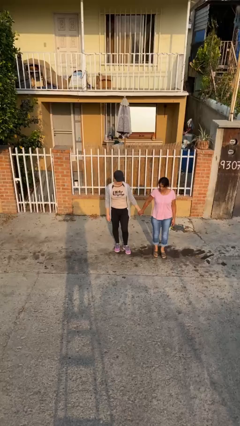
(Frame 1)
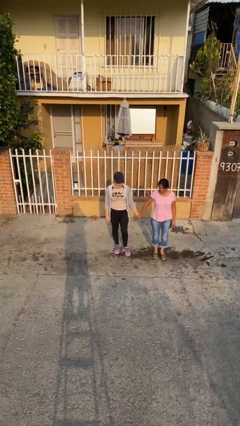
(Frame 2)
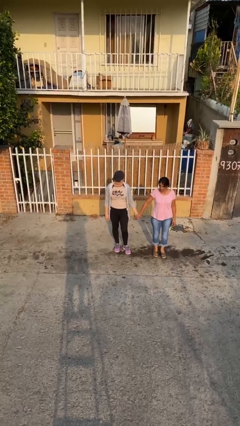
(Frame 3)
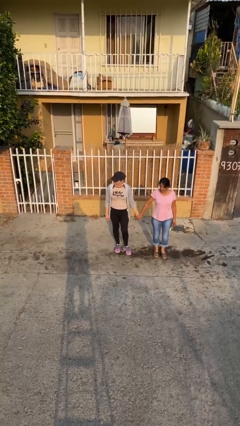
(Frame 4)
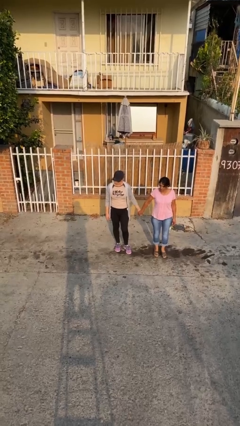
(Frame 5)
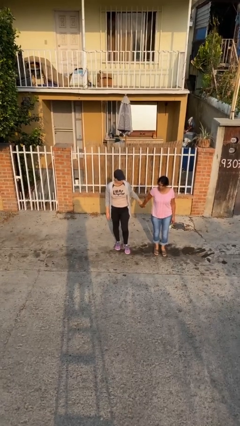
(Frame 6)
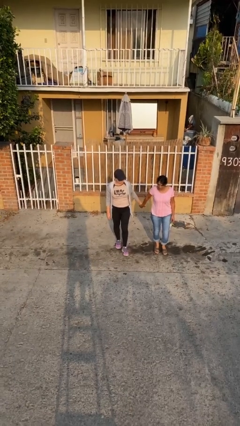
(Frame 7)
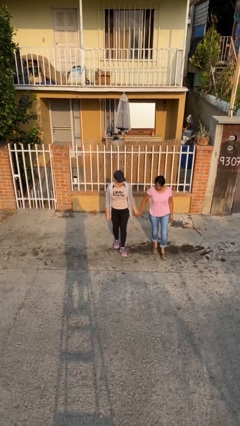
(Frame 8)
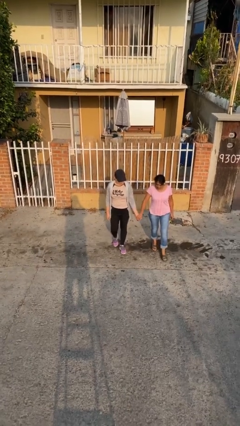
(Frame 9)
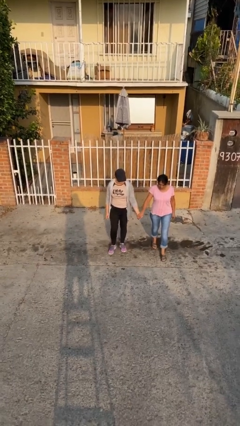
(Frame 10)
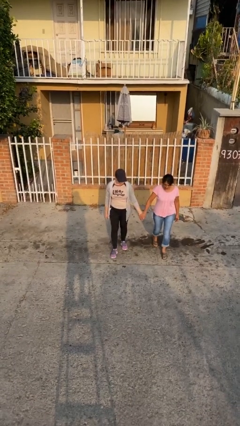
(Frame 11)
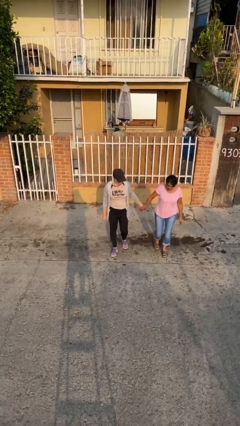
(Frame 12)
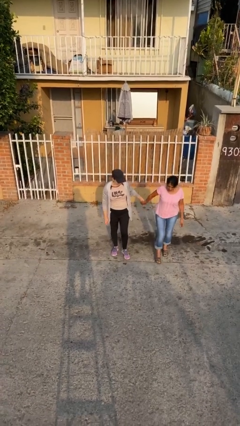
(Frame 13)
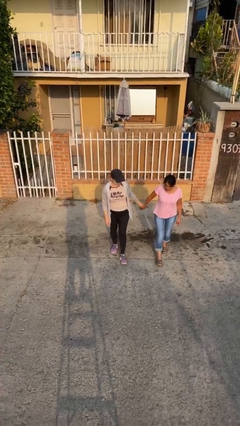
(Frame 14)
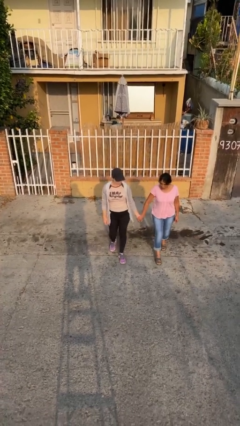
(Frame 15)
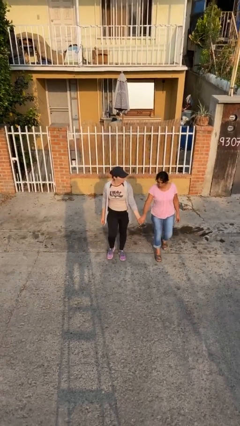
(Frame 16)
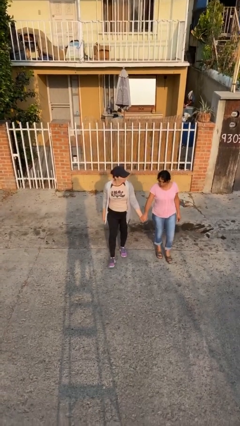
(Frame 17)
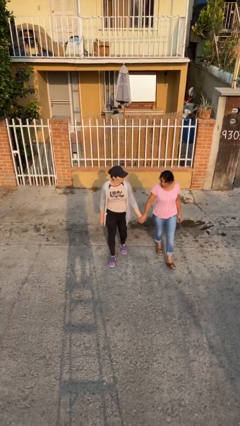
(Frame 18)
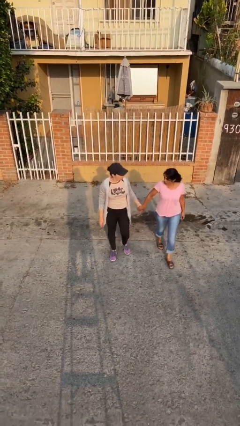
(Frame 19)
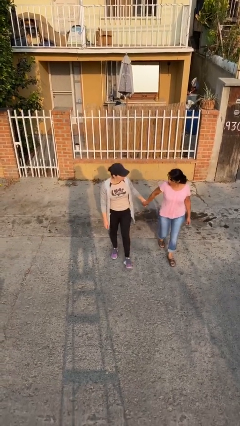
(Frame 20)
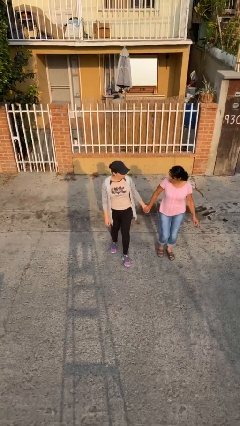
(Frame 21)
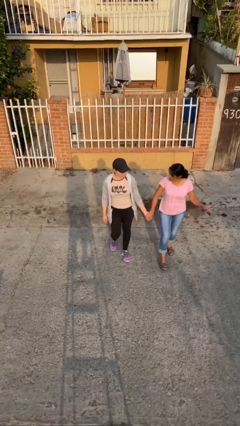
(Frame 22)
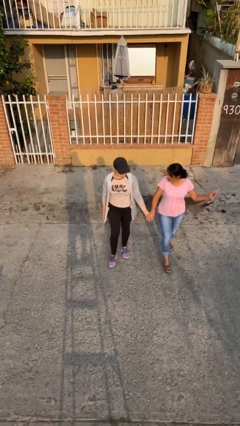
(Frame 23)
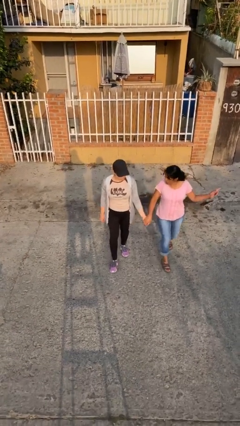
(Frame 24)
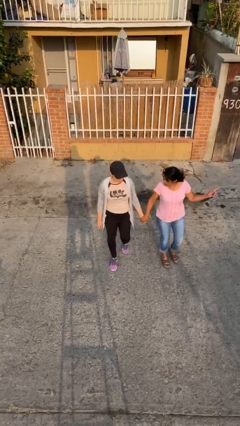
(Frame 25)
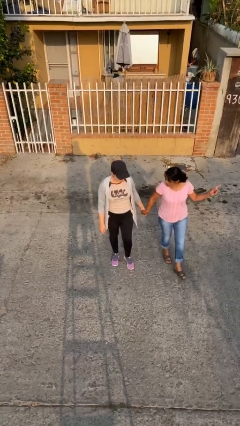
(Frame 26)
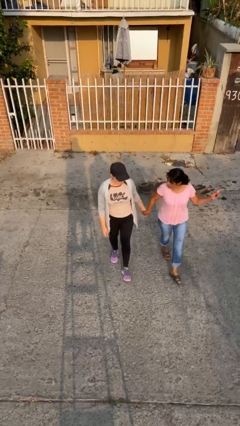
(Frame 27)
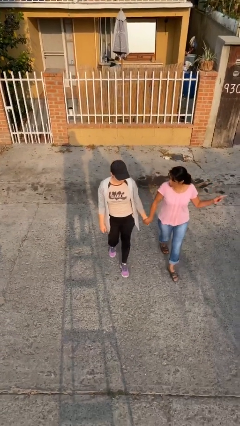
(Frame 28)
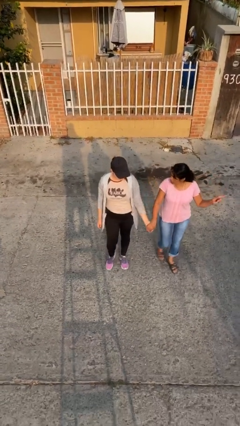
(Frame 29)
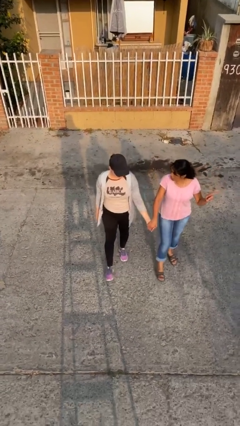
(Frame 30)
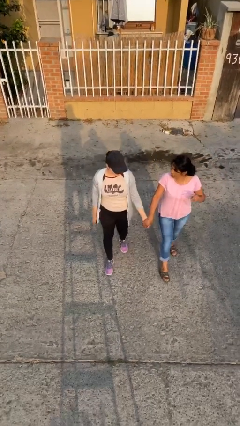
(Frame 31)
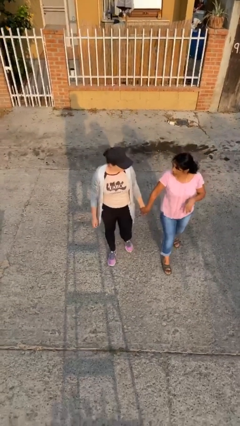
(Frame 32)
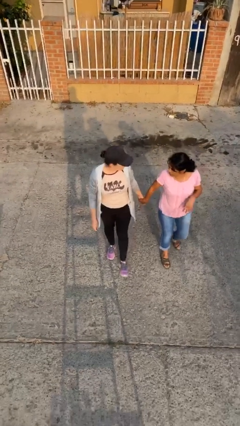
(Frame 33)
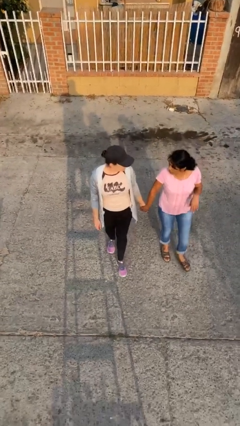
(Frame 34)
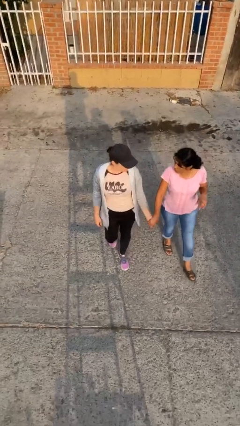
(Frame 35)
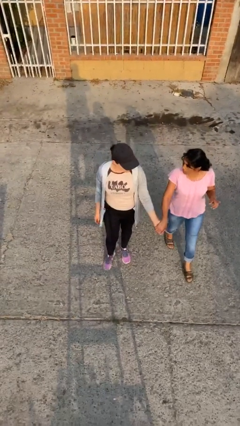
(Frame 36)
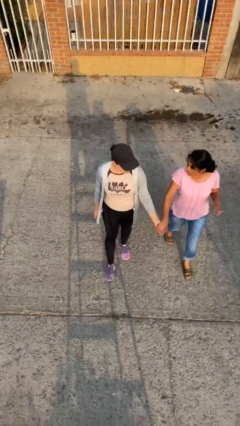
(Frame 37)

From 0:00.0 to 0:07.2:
person holds hand

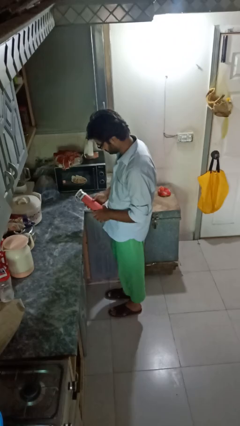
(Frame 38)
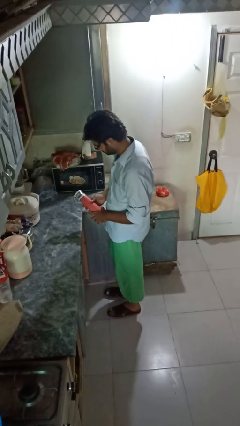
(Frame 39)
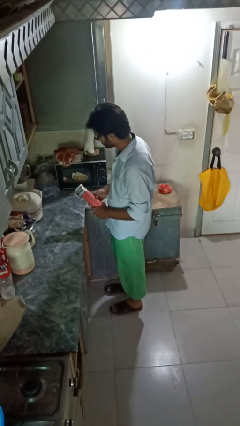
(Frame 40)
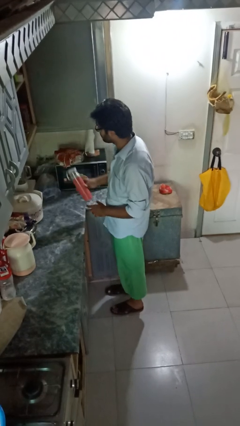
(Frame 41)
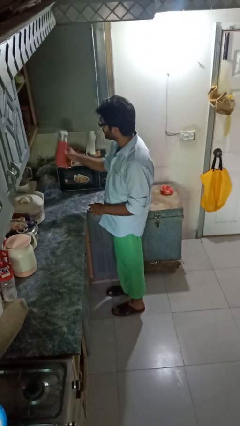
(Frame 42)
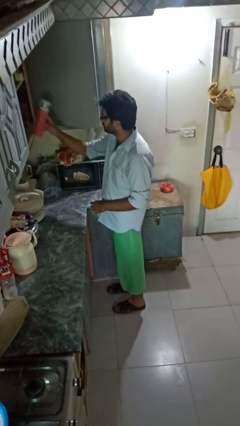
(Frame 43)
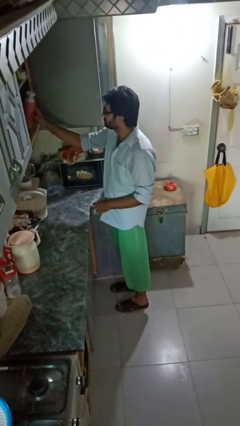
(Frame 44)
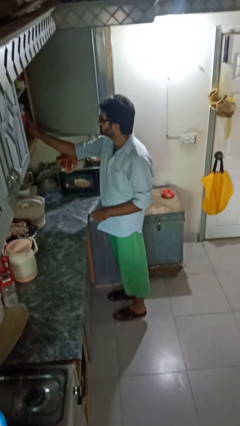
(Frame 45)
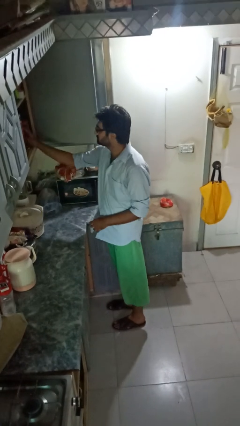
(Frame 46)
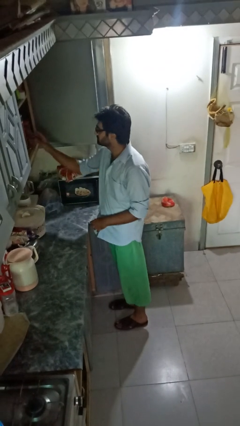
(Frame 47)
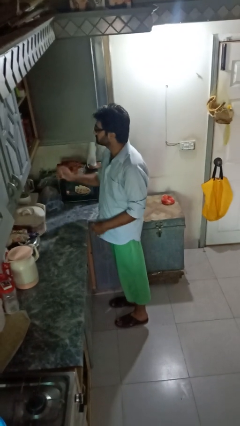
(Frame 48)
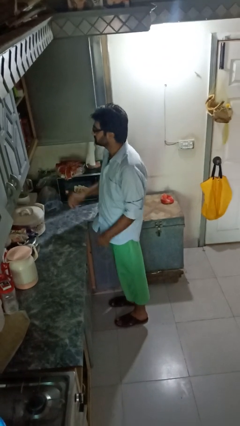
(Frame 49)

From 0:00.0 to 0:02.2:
person puts down object into cabinet

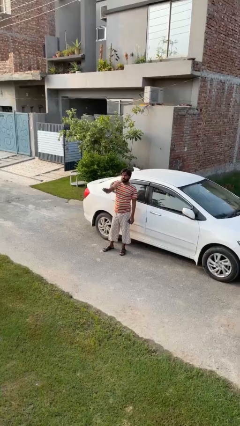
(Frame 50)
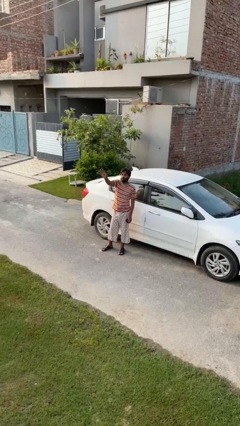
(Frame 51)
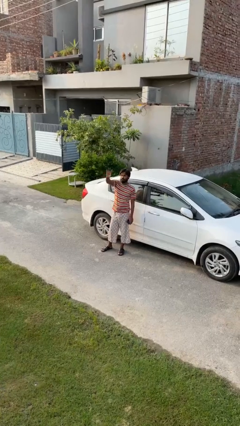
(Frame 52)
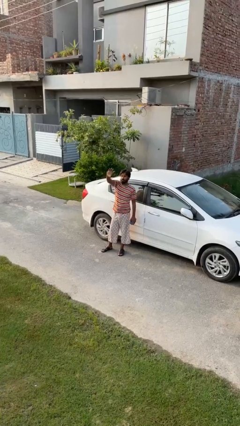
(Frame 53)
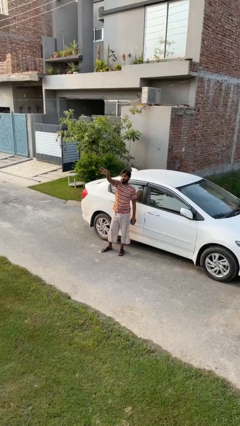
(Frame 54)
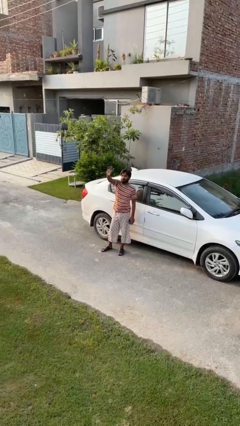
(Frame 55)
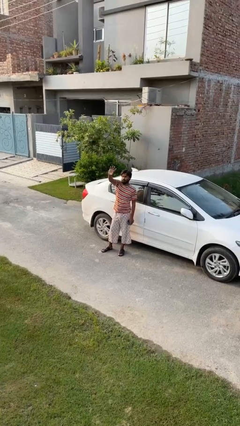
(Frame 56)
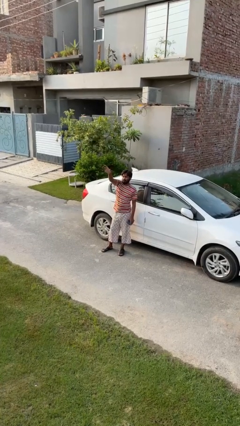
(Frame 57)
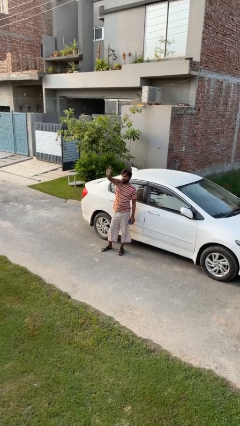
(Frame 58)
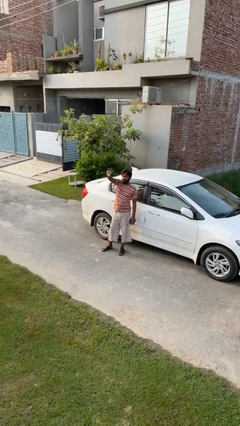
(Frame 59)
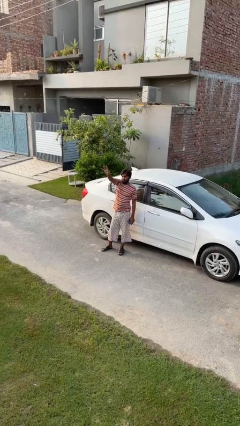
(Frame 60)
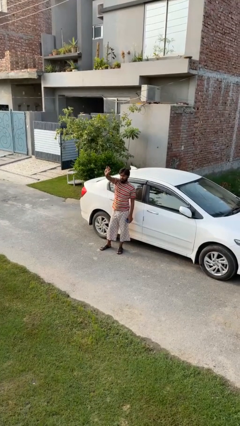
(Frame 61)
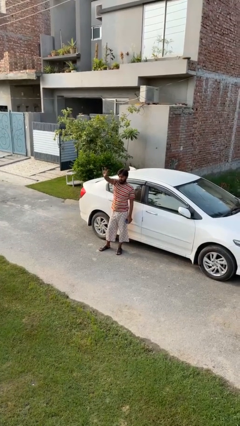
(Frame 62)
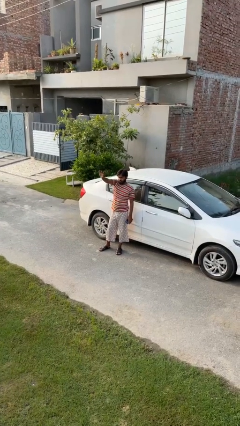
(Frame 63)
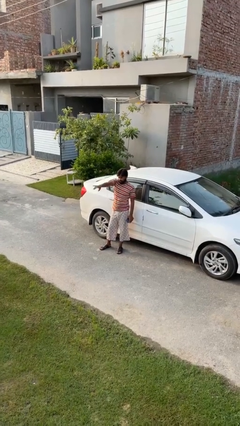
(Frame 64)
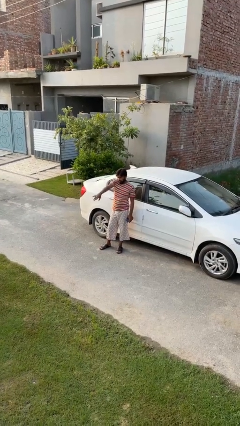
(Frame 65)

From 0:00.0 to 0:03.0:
person waves at person

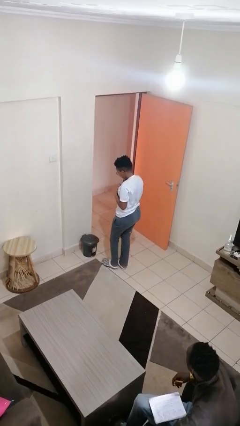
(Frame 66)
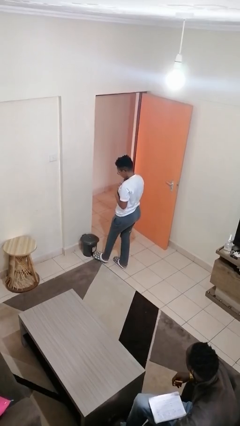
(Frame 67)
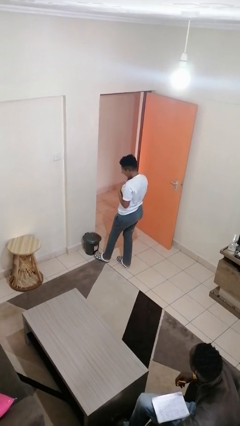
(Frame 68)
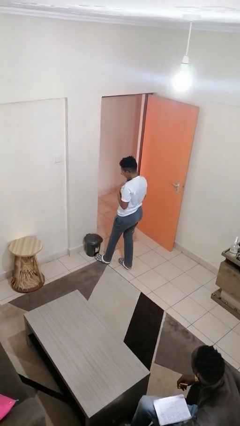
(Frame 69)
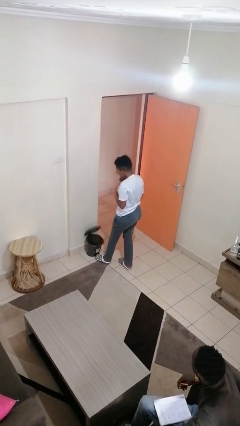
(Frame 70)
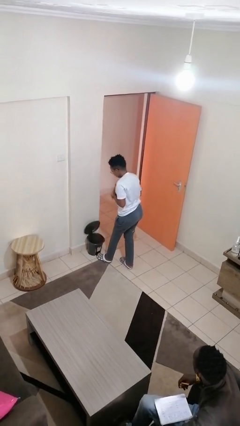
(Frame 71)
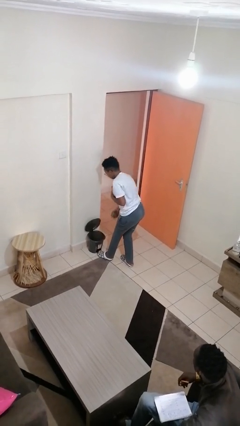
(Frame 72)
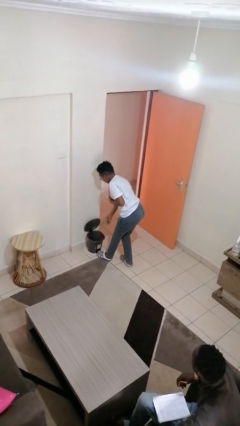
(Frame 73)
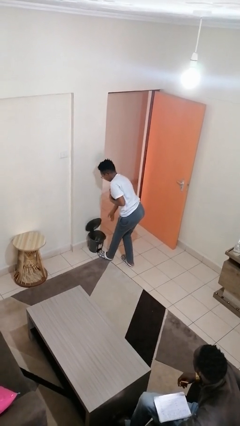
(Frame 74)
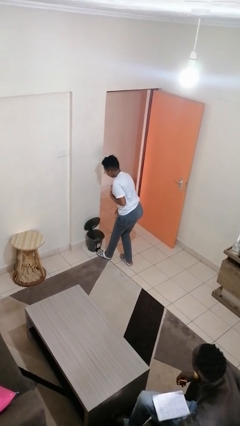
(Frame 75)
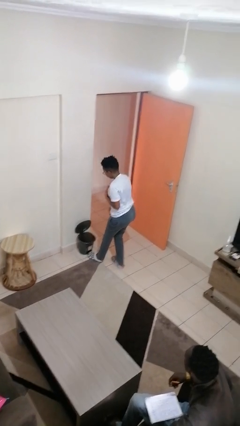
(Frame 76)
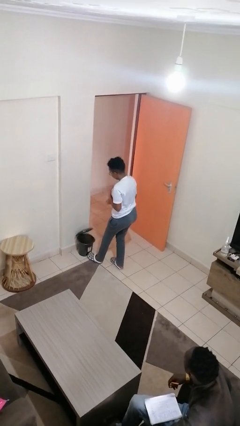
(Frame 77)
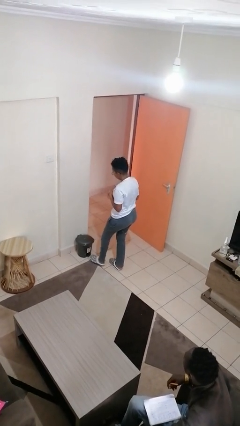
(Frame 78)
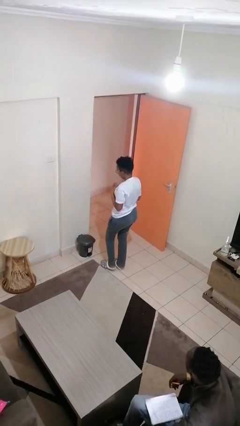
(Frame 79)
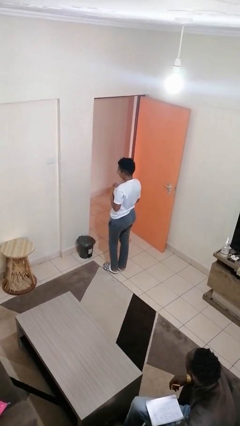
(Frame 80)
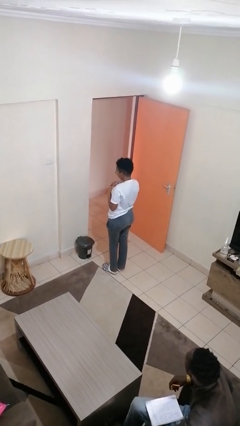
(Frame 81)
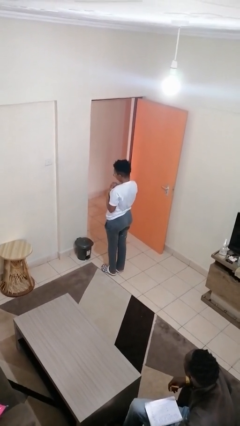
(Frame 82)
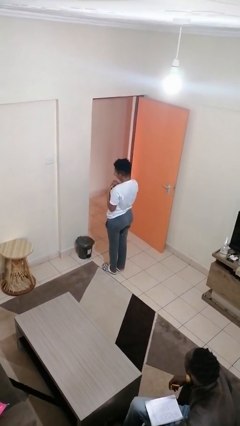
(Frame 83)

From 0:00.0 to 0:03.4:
person discards trash

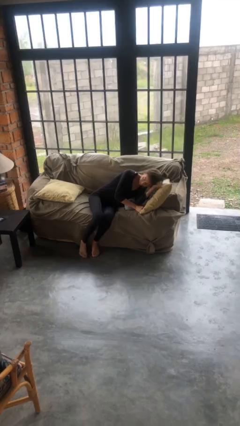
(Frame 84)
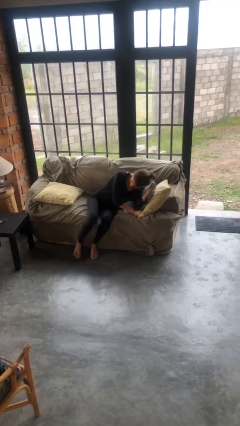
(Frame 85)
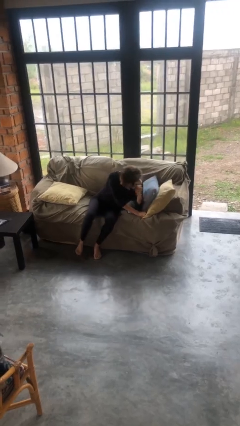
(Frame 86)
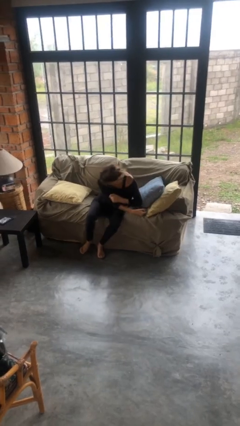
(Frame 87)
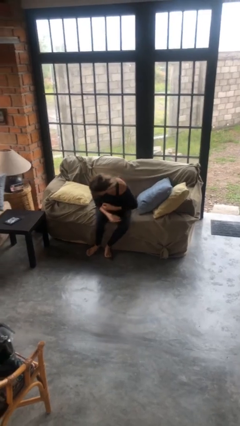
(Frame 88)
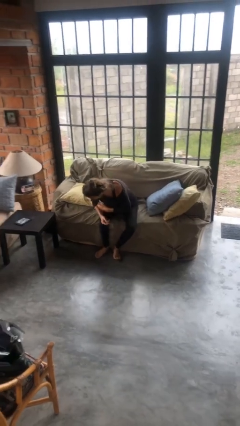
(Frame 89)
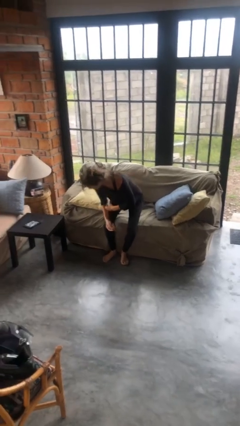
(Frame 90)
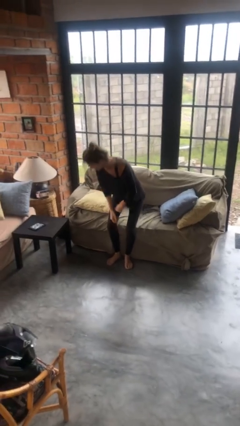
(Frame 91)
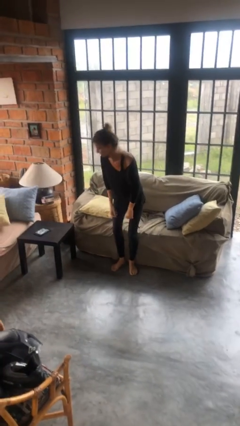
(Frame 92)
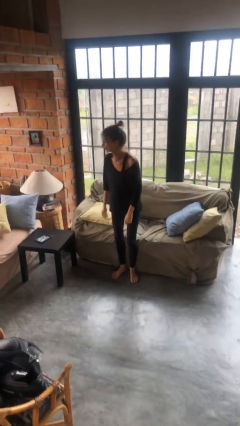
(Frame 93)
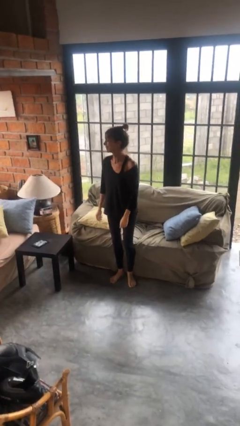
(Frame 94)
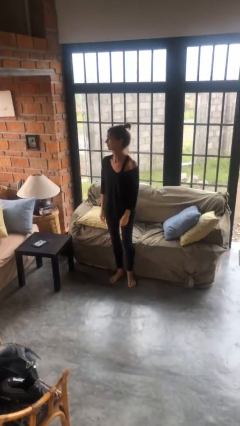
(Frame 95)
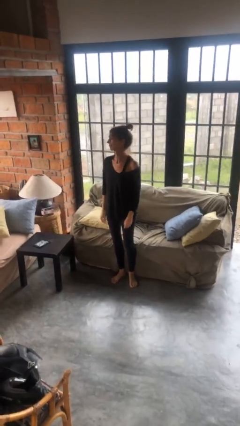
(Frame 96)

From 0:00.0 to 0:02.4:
person stands up
